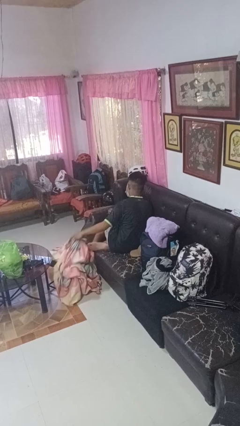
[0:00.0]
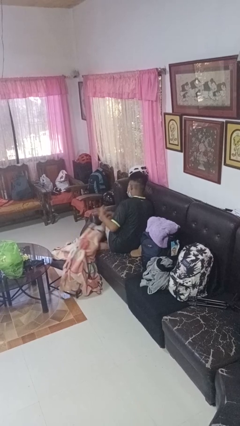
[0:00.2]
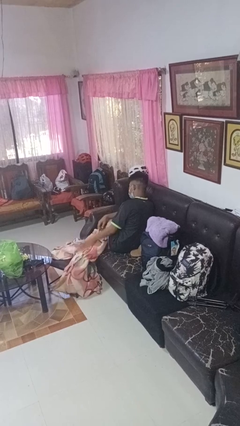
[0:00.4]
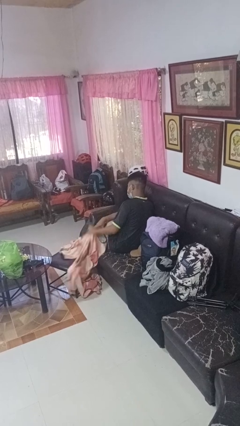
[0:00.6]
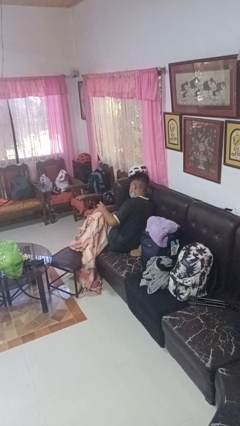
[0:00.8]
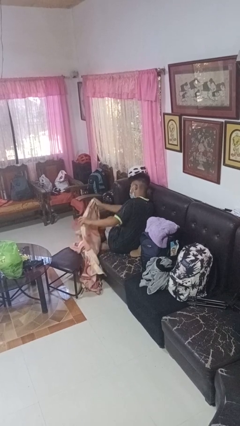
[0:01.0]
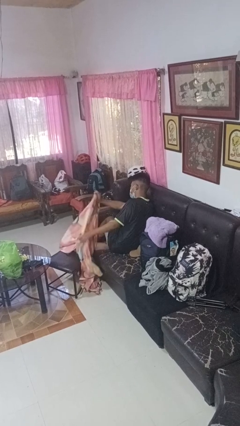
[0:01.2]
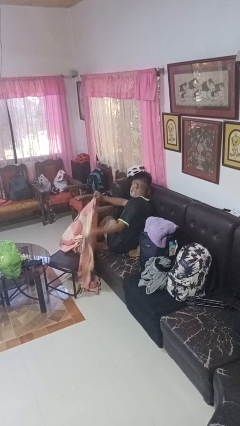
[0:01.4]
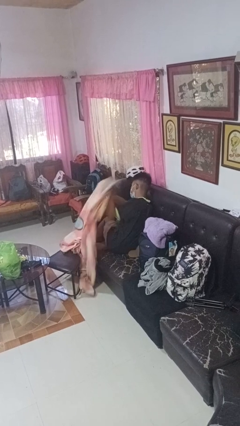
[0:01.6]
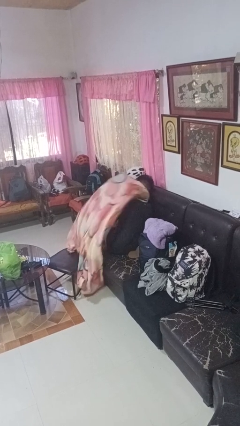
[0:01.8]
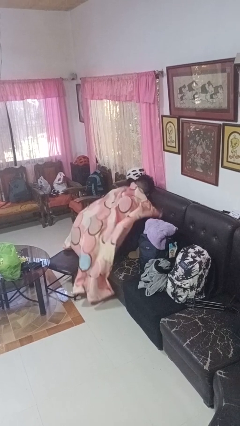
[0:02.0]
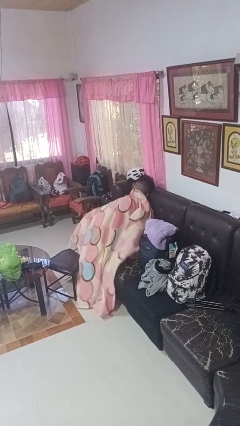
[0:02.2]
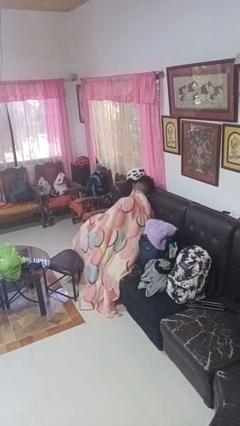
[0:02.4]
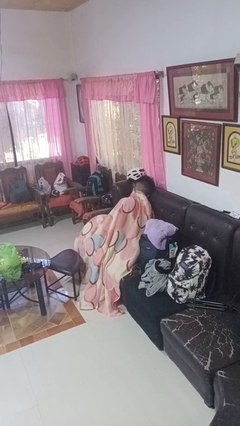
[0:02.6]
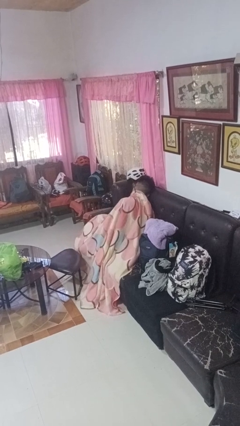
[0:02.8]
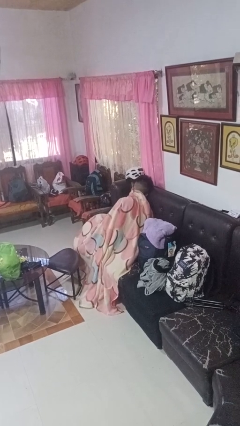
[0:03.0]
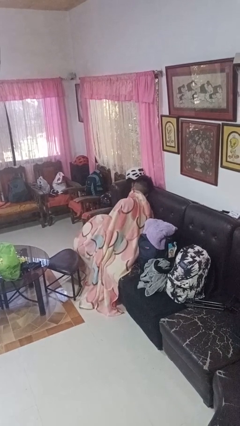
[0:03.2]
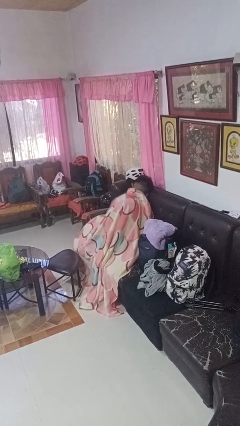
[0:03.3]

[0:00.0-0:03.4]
person covers with blanket

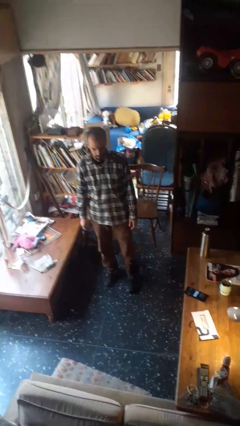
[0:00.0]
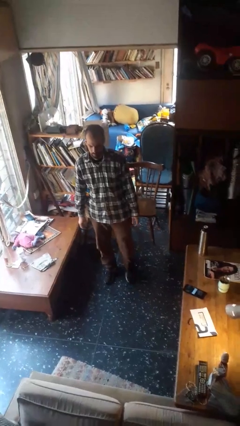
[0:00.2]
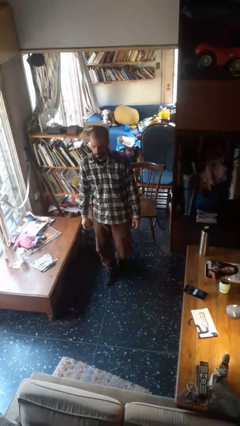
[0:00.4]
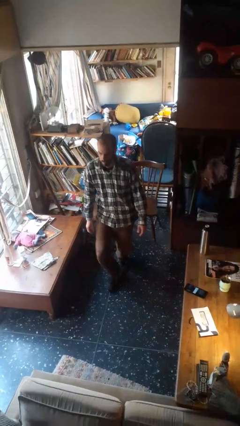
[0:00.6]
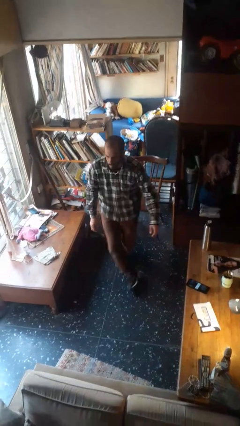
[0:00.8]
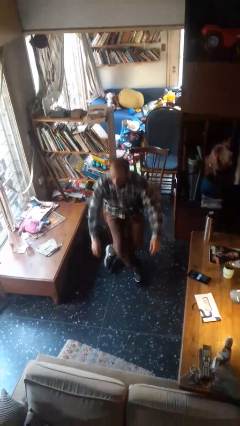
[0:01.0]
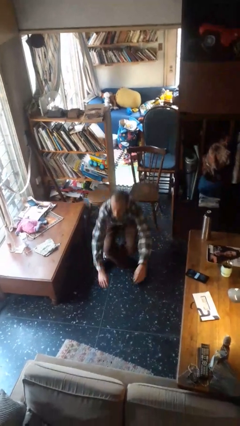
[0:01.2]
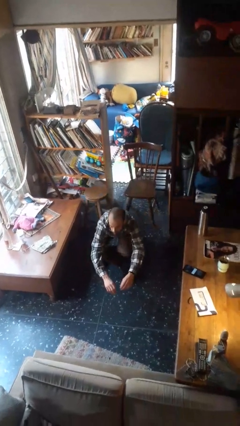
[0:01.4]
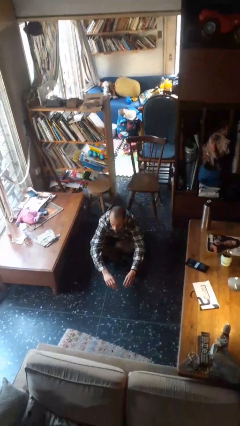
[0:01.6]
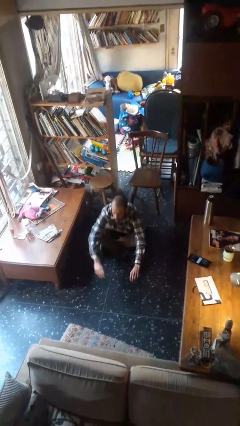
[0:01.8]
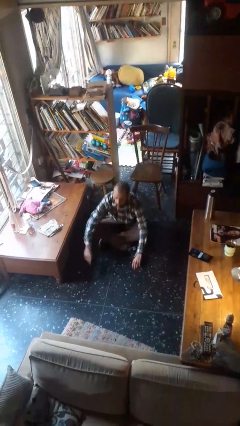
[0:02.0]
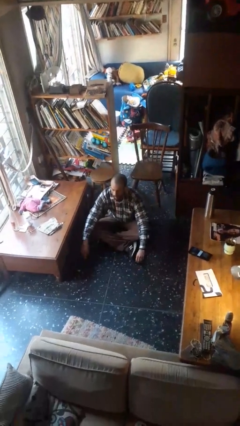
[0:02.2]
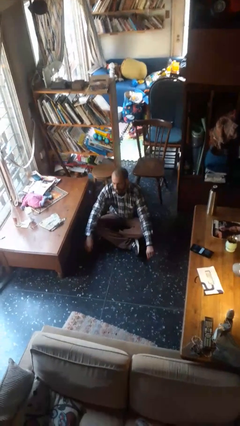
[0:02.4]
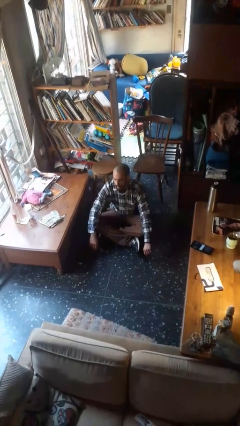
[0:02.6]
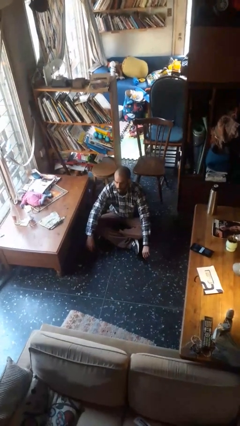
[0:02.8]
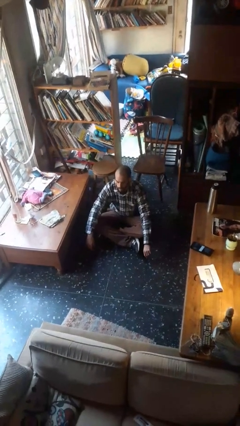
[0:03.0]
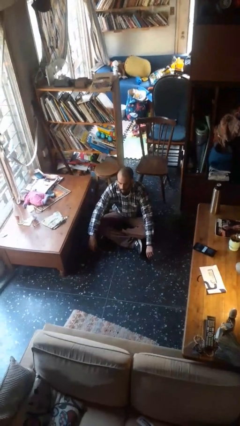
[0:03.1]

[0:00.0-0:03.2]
person sits crisscross

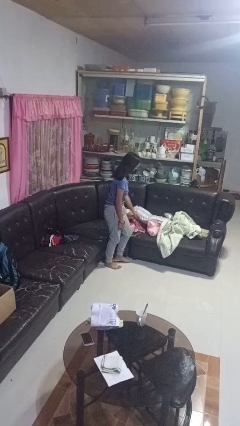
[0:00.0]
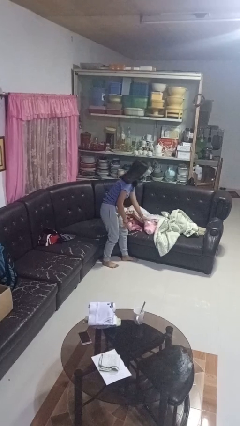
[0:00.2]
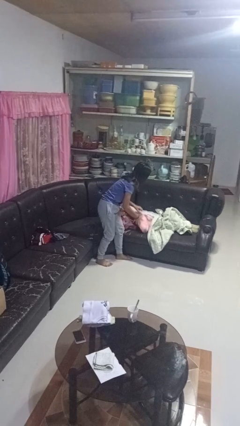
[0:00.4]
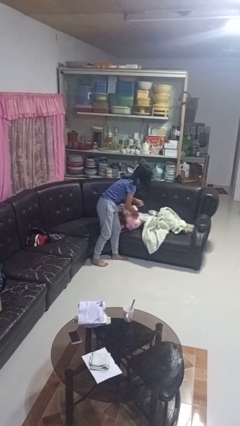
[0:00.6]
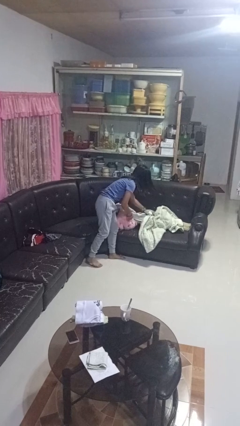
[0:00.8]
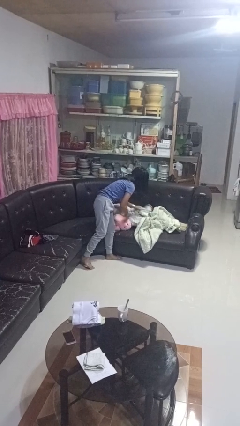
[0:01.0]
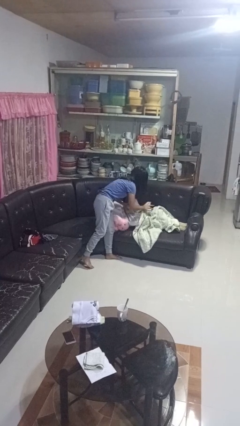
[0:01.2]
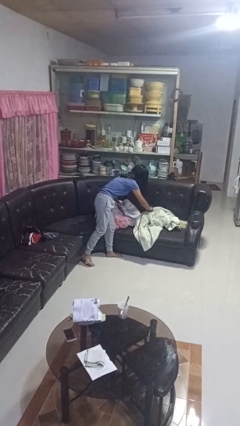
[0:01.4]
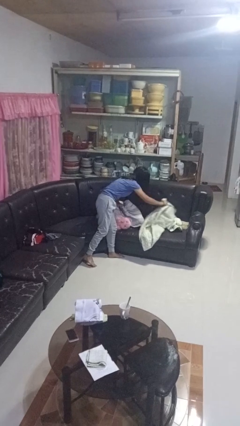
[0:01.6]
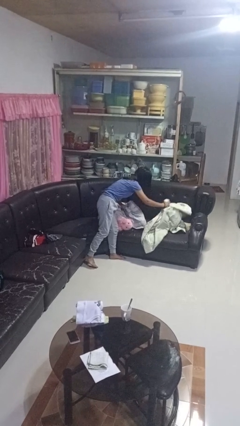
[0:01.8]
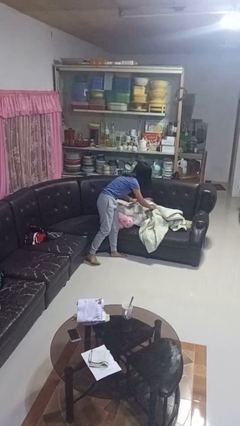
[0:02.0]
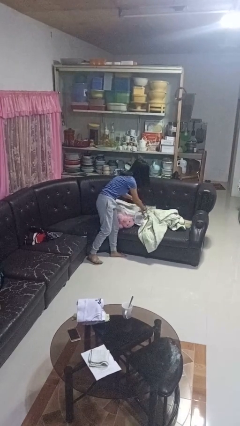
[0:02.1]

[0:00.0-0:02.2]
person searches in couch

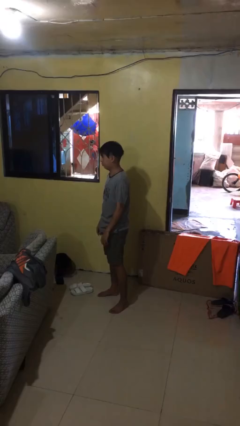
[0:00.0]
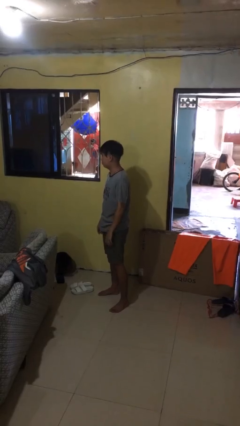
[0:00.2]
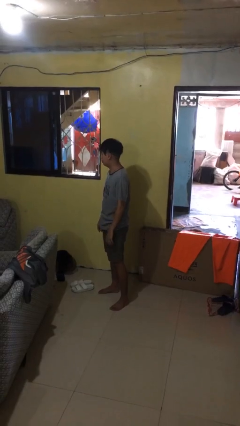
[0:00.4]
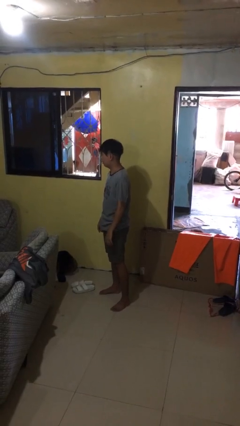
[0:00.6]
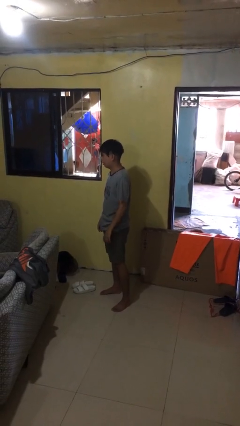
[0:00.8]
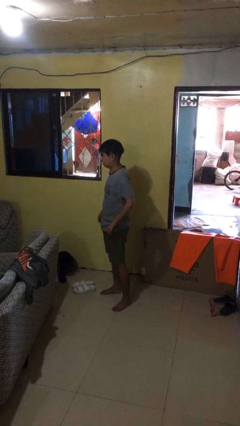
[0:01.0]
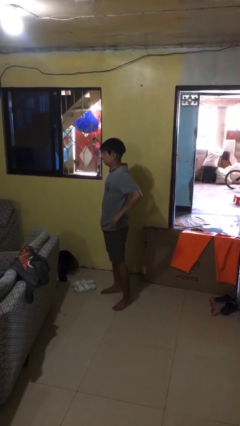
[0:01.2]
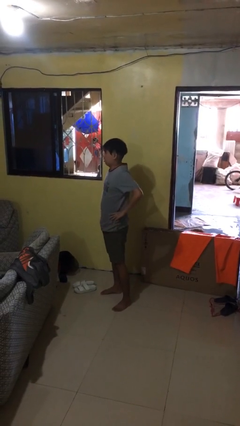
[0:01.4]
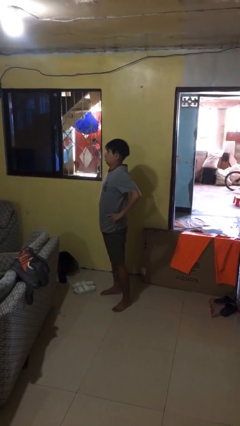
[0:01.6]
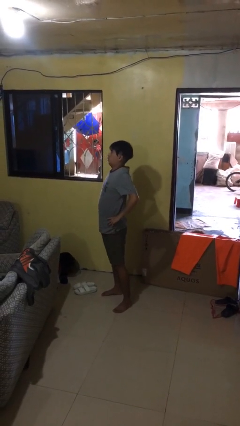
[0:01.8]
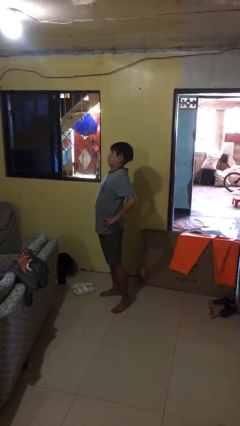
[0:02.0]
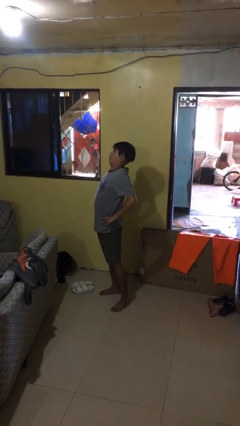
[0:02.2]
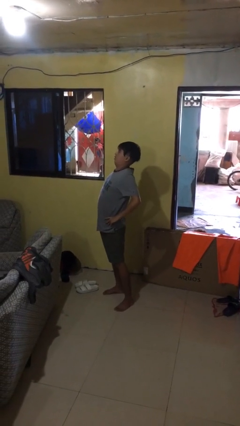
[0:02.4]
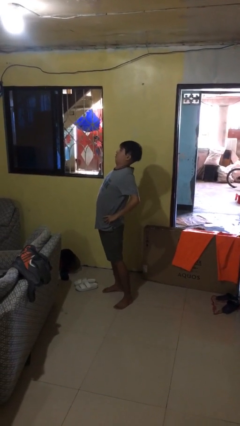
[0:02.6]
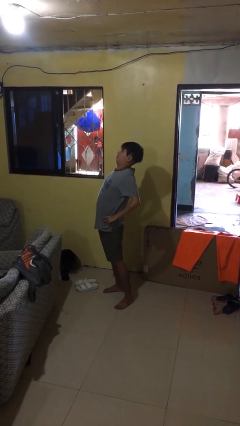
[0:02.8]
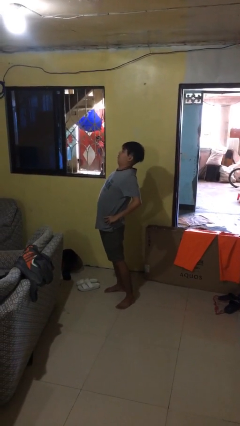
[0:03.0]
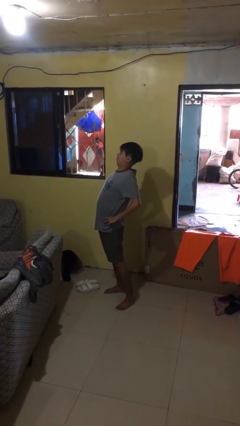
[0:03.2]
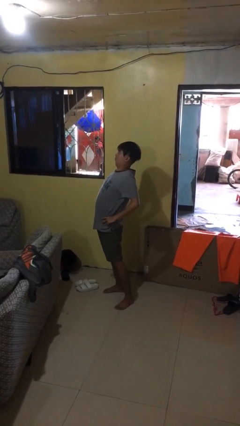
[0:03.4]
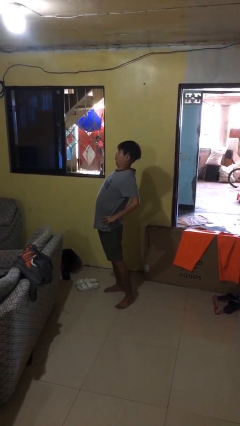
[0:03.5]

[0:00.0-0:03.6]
person stretches back

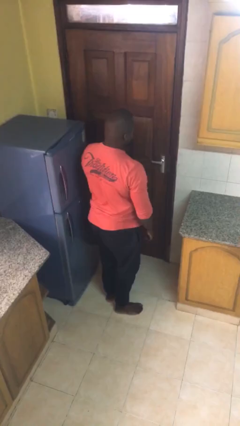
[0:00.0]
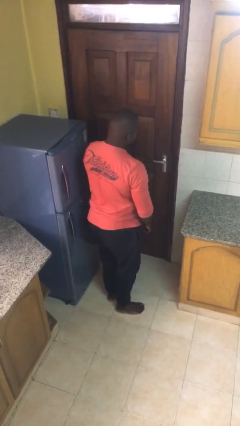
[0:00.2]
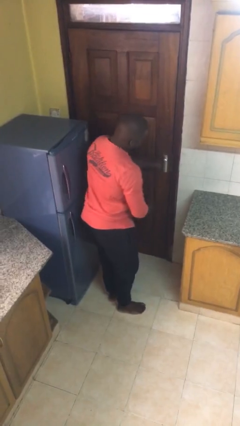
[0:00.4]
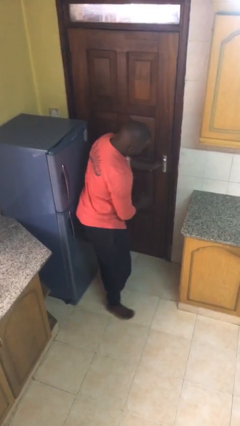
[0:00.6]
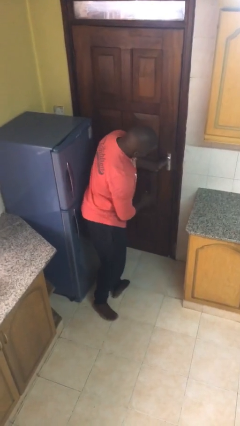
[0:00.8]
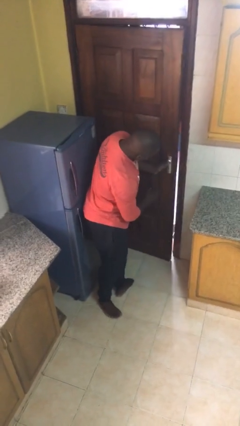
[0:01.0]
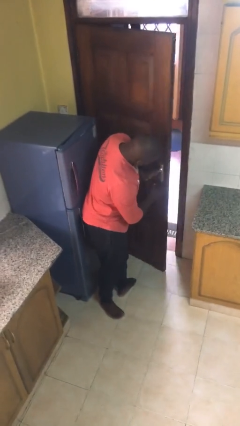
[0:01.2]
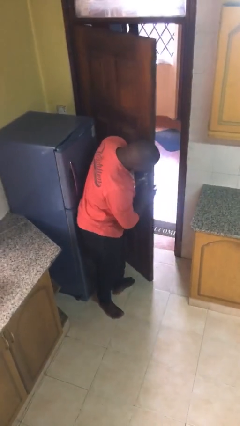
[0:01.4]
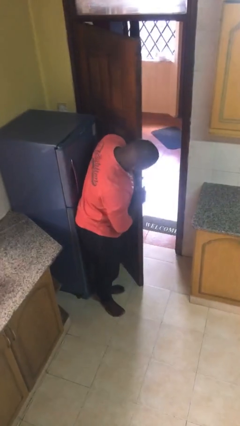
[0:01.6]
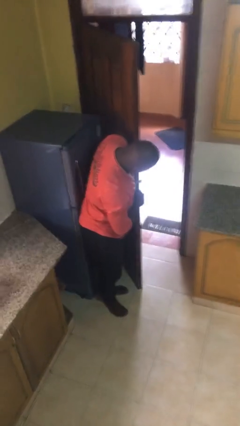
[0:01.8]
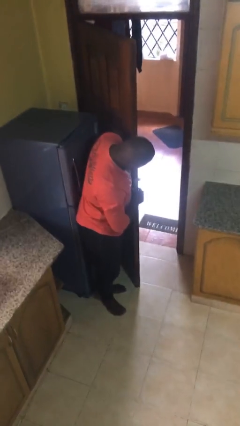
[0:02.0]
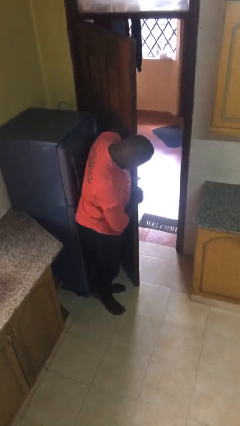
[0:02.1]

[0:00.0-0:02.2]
person opens facility door

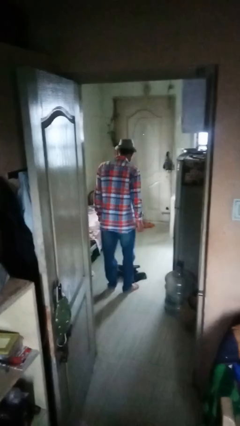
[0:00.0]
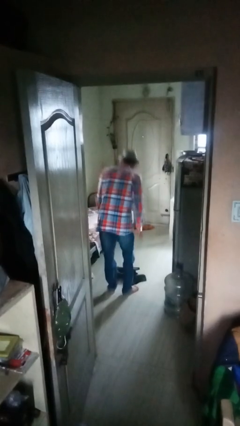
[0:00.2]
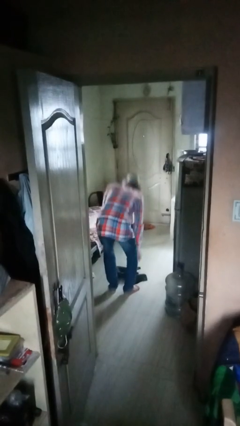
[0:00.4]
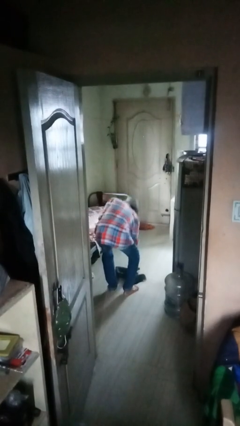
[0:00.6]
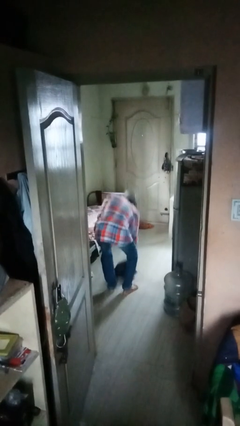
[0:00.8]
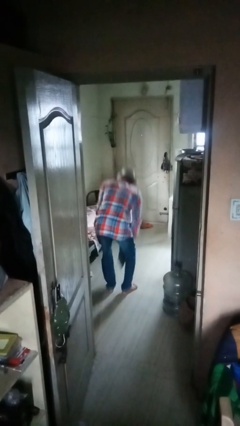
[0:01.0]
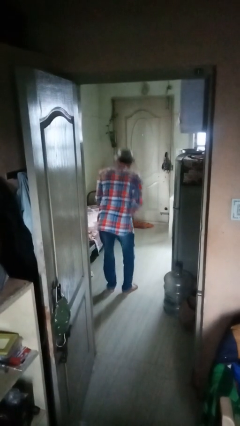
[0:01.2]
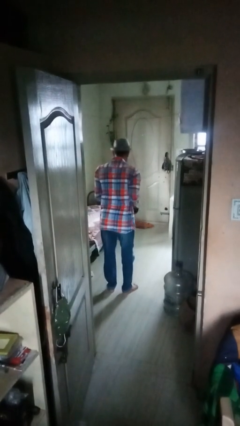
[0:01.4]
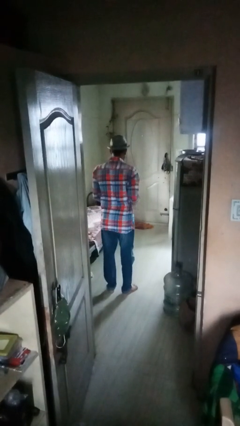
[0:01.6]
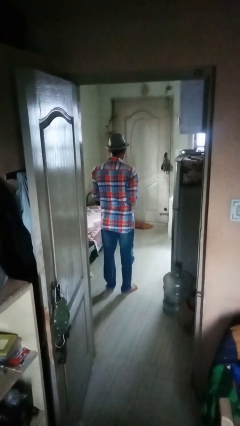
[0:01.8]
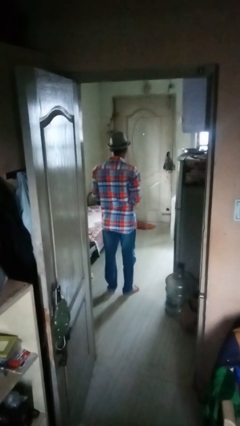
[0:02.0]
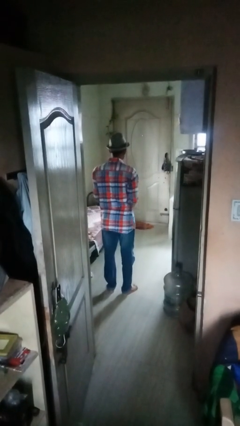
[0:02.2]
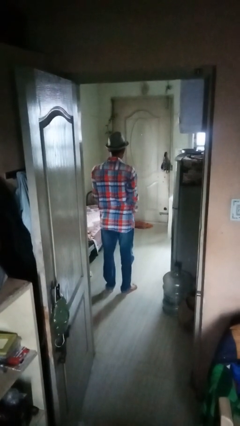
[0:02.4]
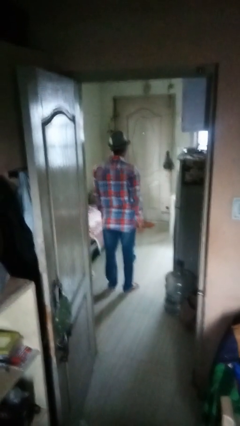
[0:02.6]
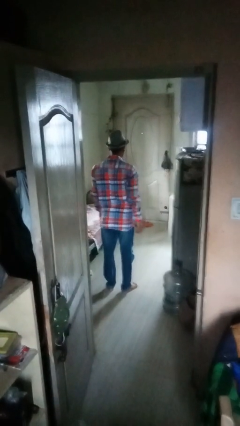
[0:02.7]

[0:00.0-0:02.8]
person picks up object from floor
